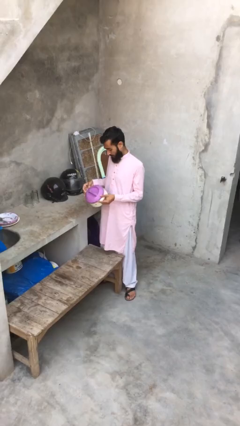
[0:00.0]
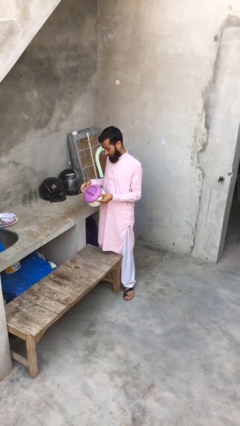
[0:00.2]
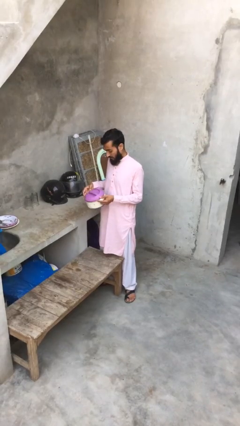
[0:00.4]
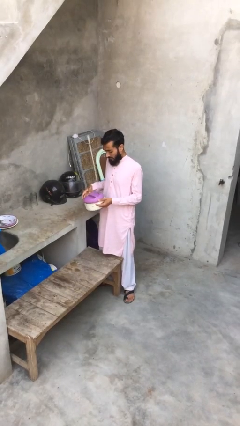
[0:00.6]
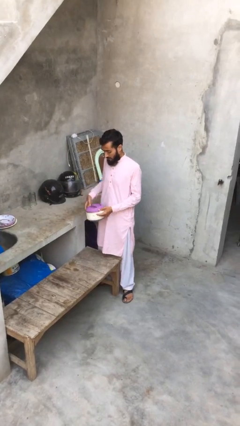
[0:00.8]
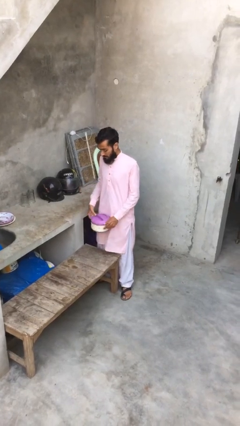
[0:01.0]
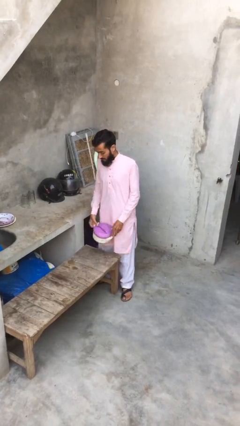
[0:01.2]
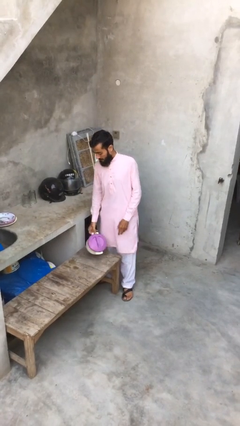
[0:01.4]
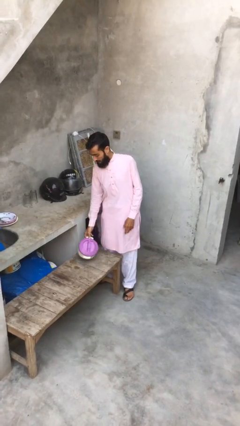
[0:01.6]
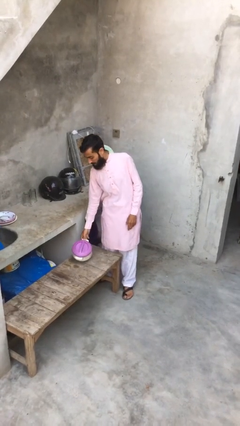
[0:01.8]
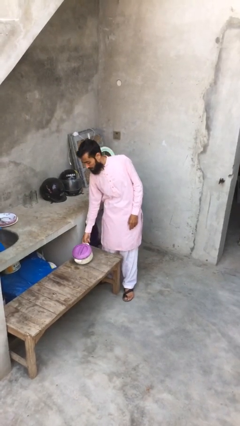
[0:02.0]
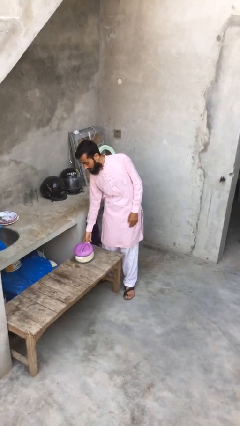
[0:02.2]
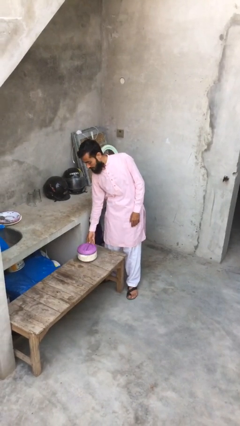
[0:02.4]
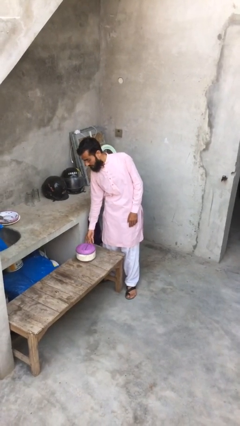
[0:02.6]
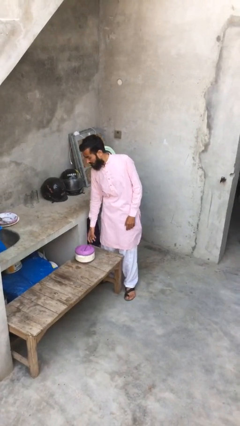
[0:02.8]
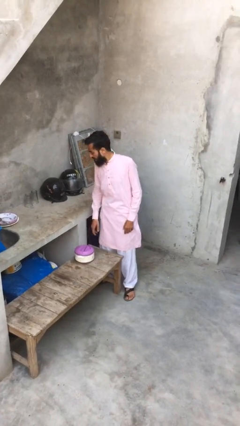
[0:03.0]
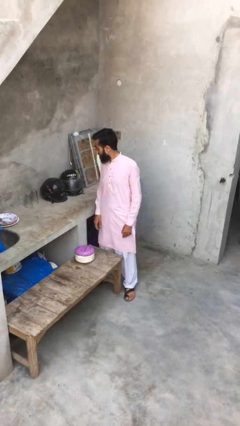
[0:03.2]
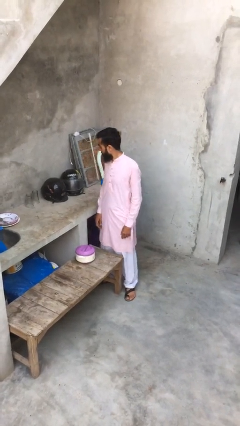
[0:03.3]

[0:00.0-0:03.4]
person puts down object on table

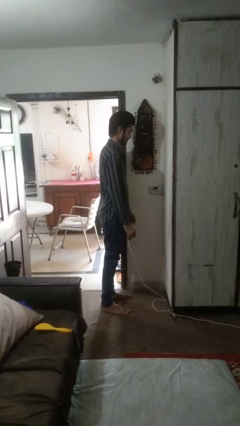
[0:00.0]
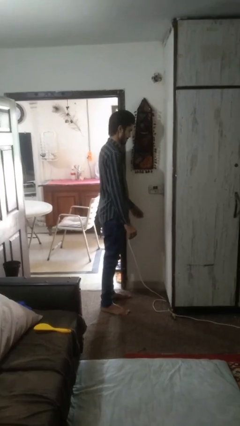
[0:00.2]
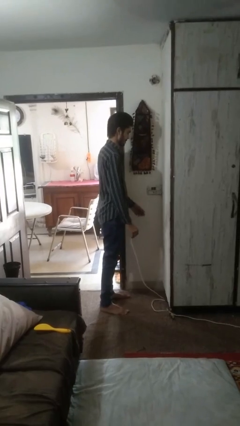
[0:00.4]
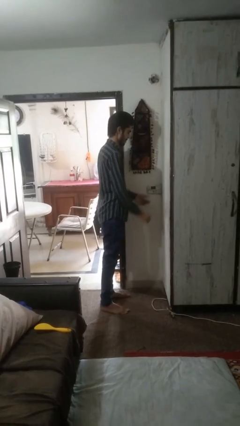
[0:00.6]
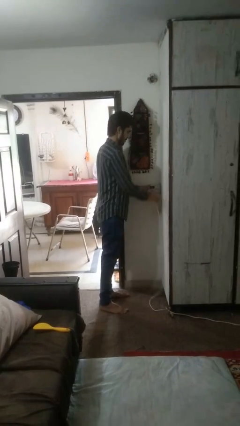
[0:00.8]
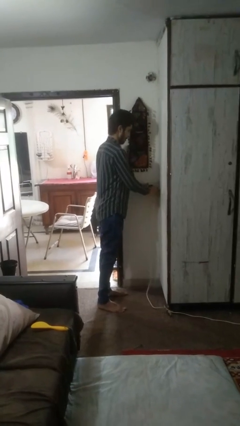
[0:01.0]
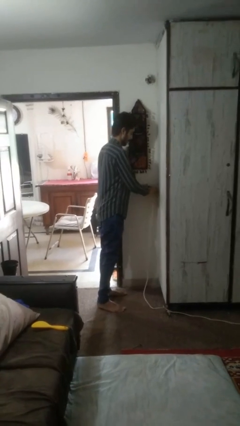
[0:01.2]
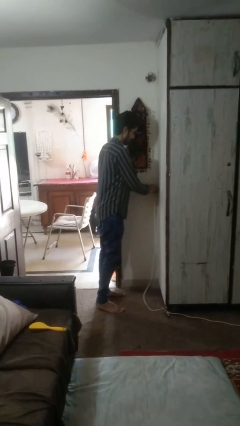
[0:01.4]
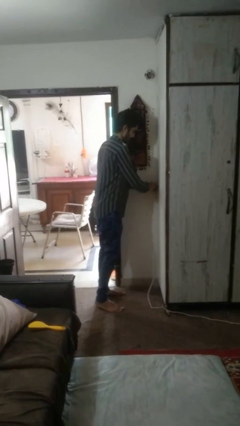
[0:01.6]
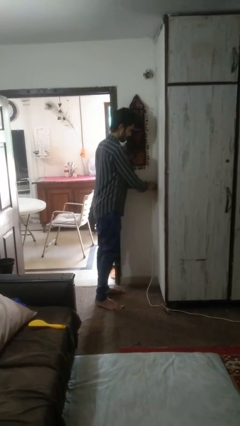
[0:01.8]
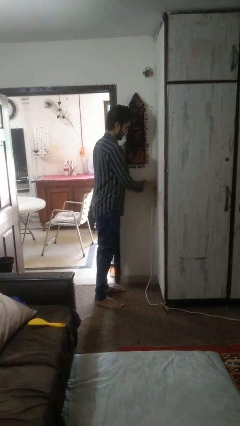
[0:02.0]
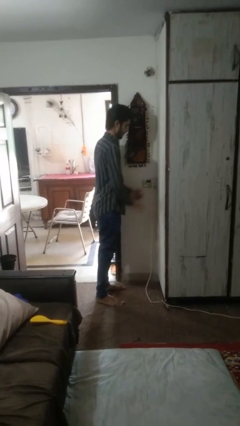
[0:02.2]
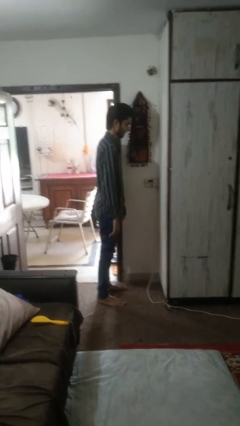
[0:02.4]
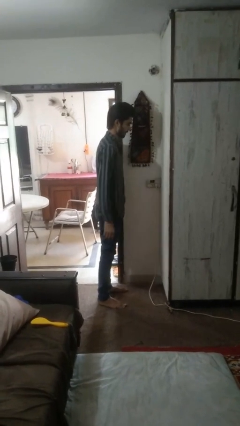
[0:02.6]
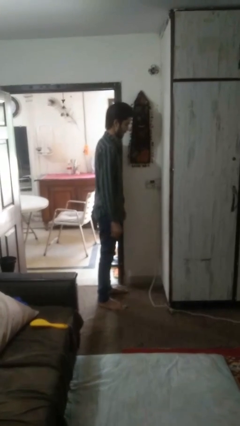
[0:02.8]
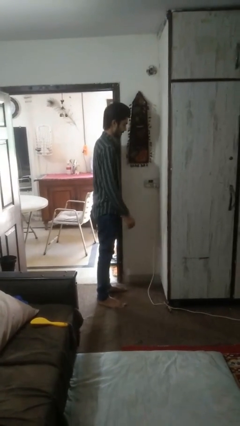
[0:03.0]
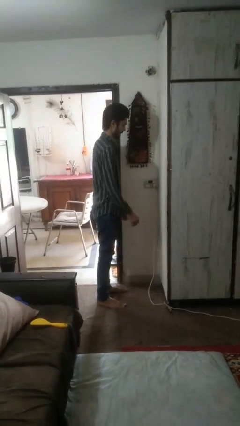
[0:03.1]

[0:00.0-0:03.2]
person plugs into electrical socket

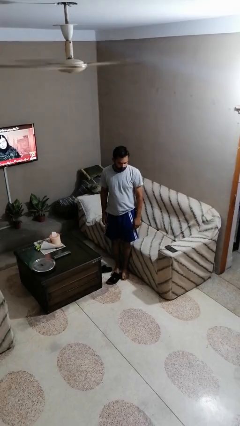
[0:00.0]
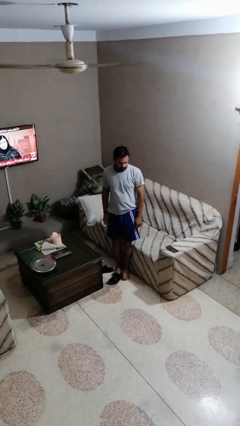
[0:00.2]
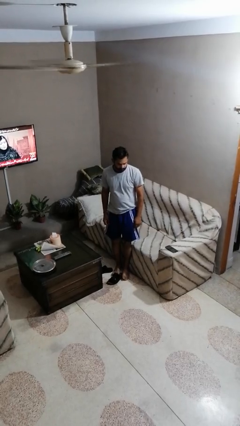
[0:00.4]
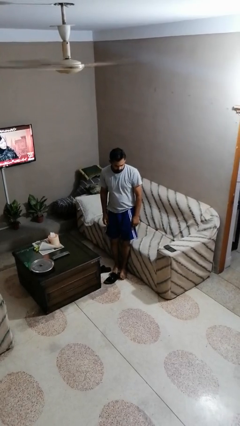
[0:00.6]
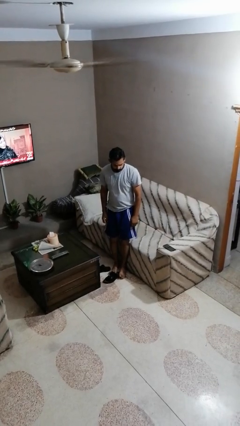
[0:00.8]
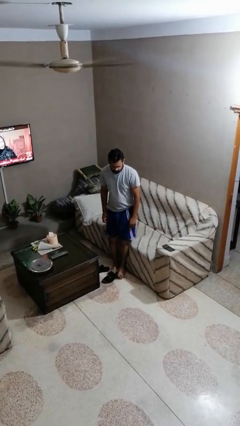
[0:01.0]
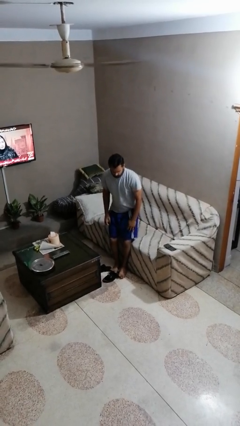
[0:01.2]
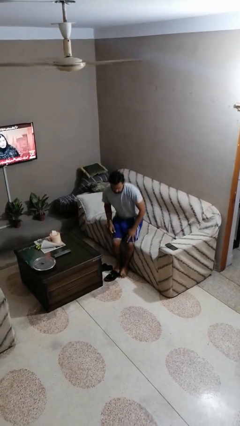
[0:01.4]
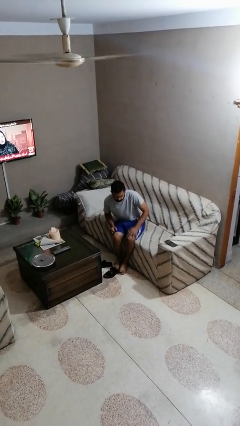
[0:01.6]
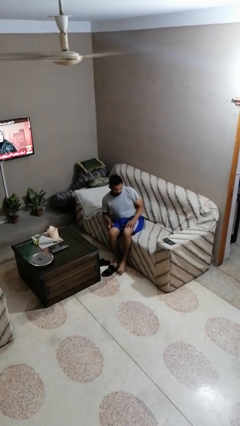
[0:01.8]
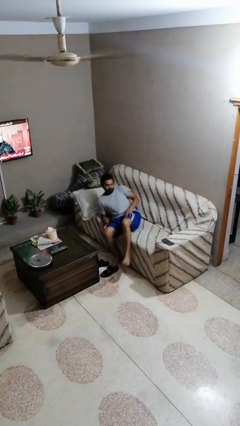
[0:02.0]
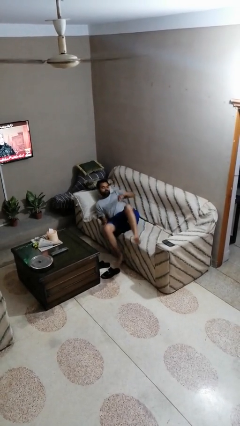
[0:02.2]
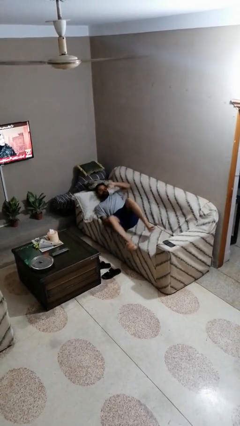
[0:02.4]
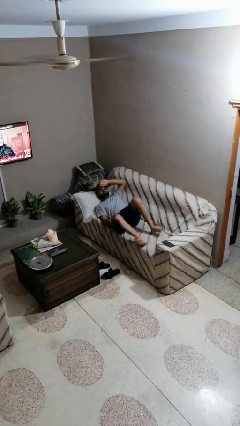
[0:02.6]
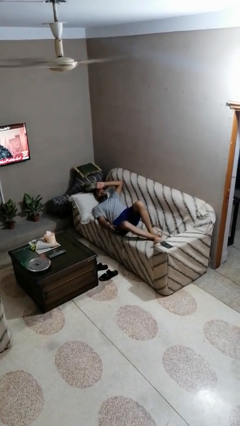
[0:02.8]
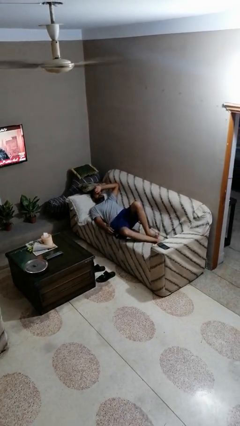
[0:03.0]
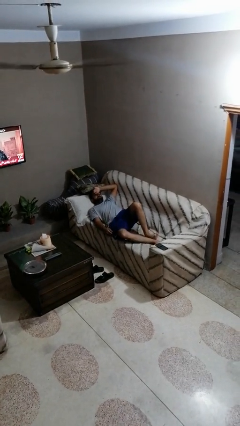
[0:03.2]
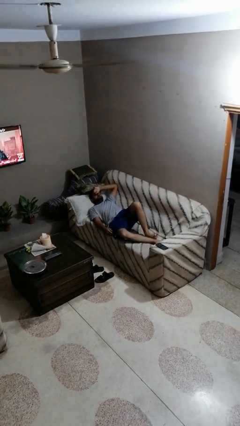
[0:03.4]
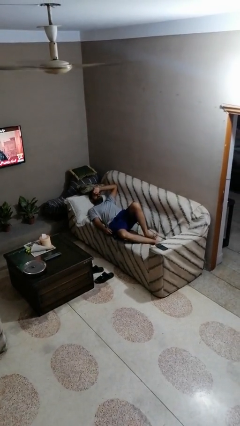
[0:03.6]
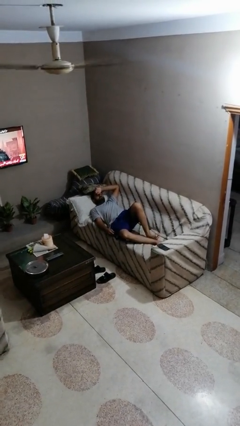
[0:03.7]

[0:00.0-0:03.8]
person lies down on couch

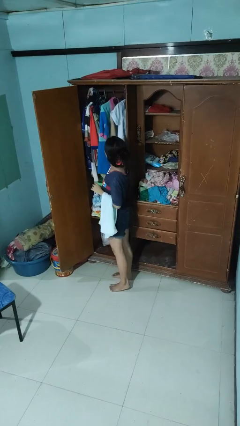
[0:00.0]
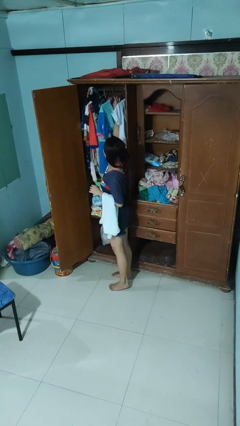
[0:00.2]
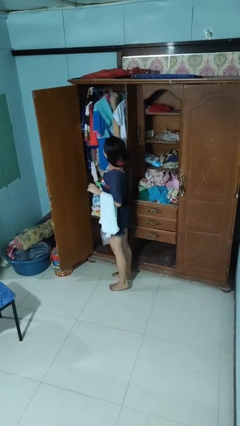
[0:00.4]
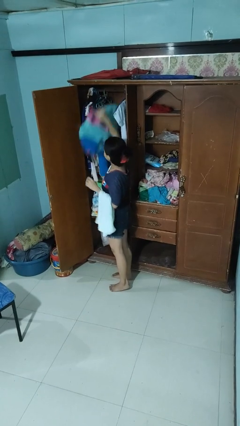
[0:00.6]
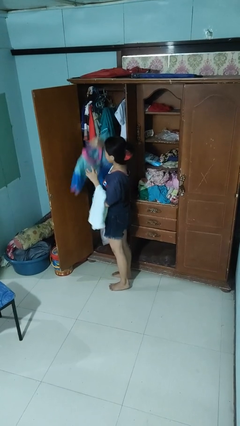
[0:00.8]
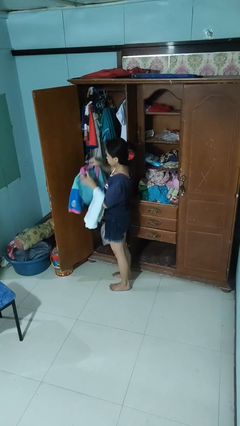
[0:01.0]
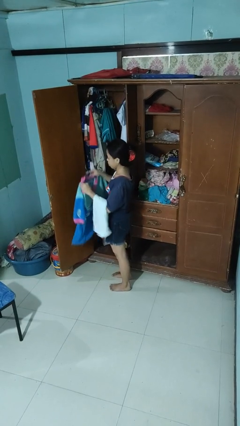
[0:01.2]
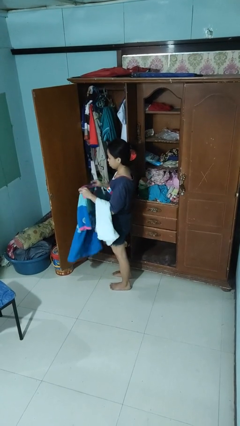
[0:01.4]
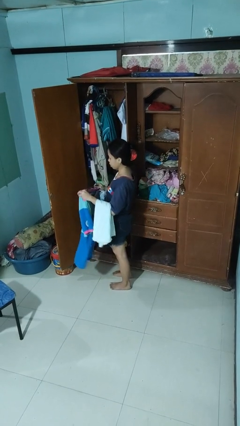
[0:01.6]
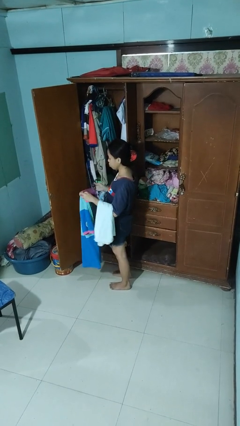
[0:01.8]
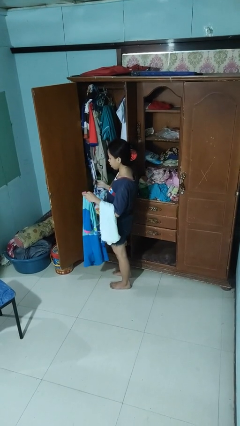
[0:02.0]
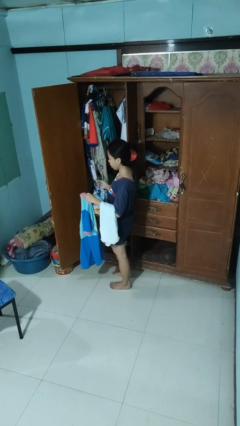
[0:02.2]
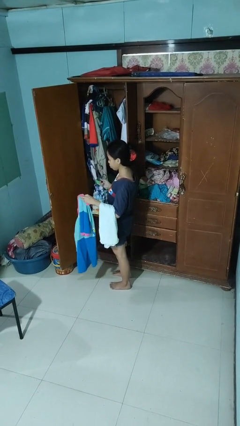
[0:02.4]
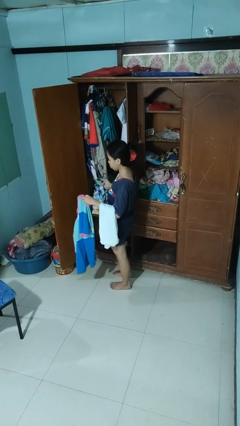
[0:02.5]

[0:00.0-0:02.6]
person takes clothes from closet

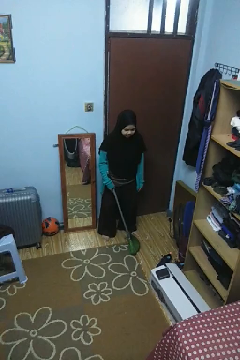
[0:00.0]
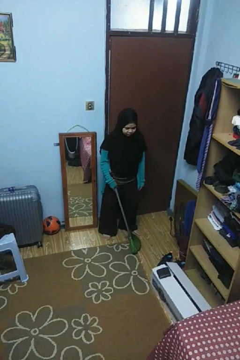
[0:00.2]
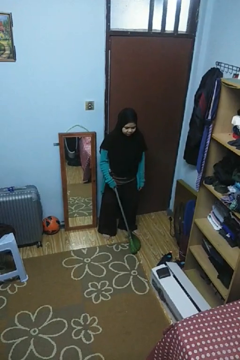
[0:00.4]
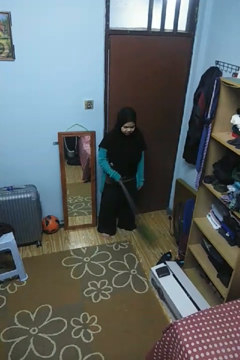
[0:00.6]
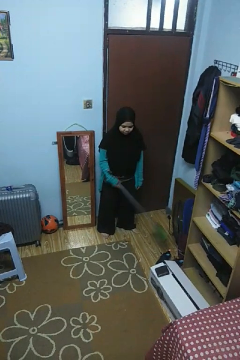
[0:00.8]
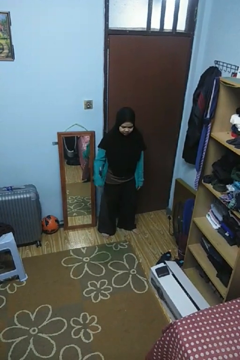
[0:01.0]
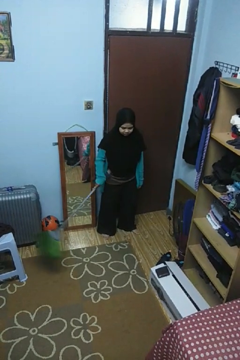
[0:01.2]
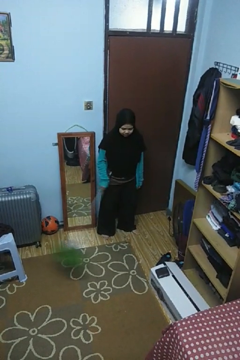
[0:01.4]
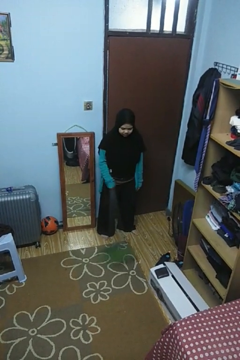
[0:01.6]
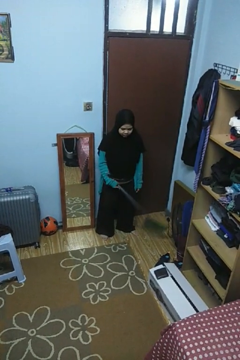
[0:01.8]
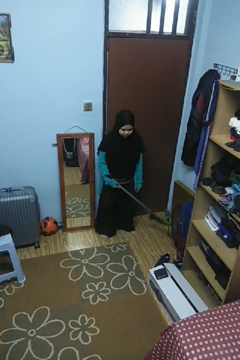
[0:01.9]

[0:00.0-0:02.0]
person sweeps floor

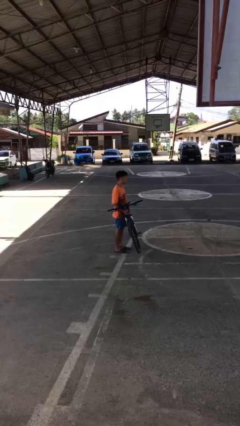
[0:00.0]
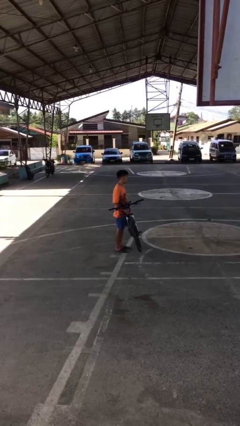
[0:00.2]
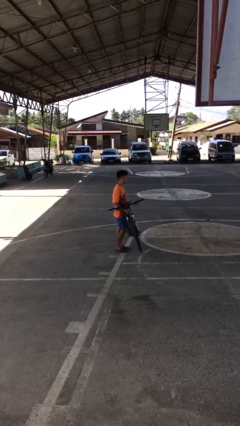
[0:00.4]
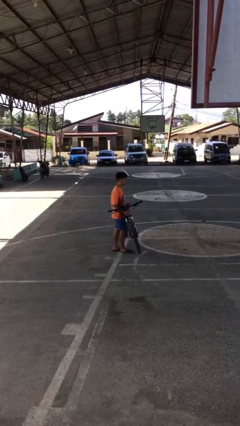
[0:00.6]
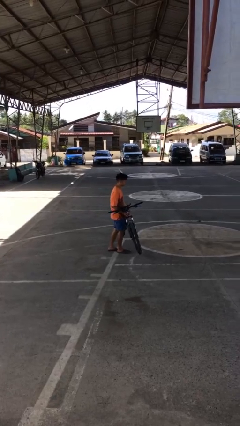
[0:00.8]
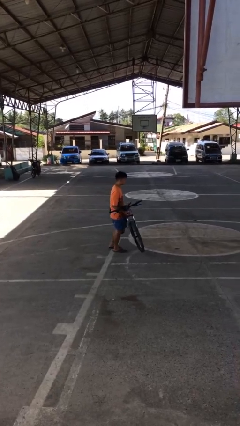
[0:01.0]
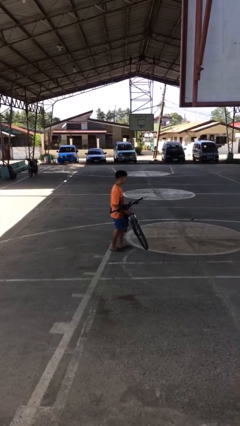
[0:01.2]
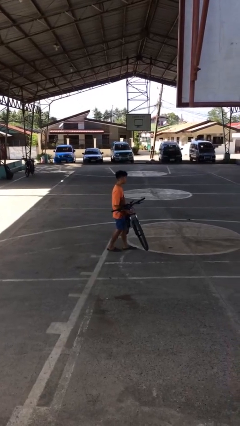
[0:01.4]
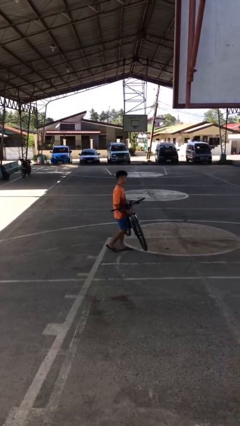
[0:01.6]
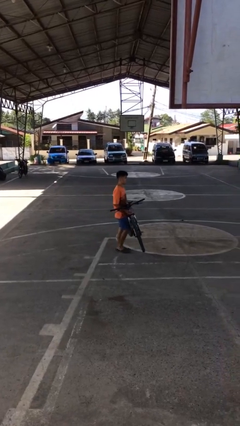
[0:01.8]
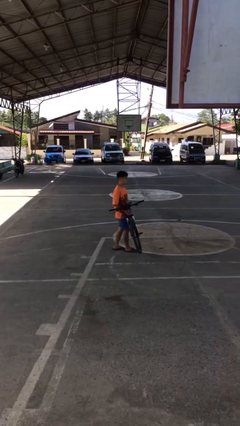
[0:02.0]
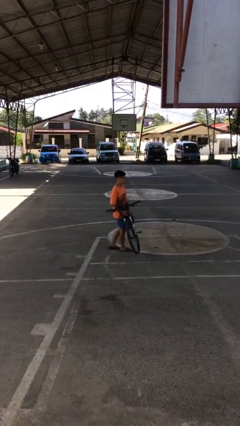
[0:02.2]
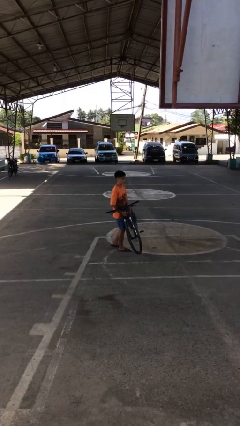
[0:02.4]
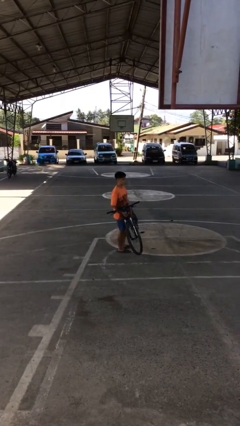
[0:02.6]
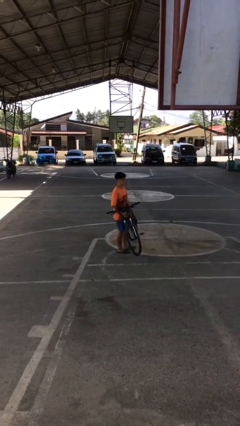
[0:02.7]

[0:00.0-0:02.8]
person carries bicycle
